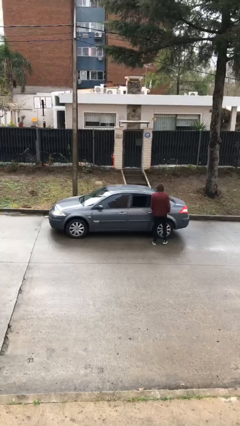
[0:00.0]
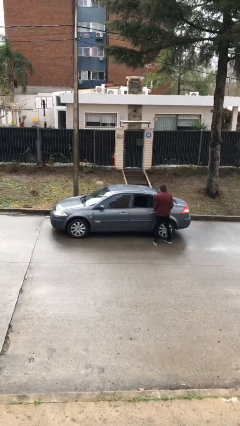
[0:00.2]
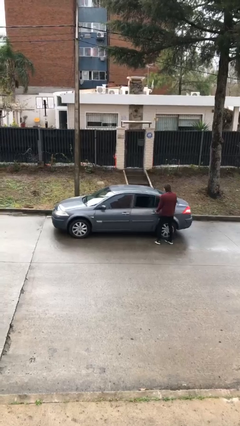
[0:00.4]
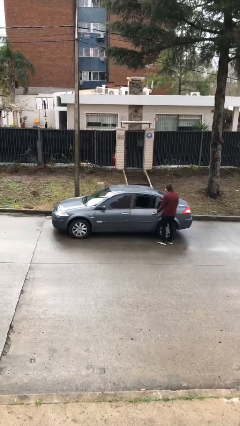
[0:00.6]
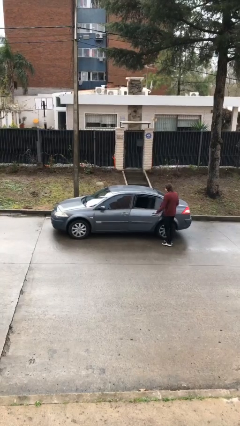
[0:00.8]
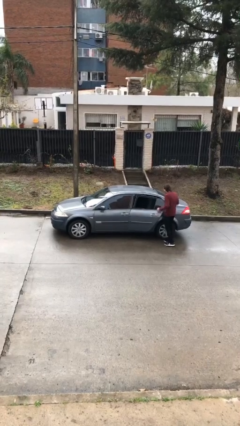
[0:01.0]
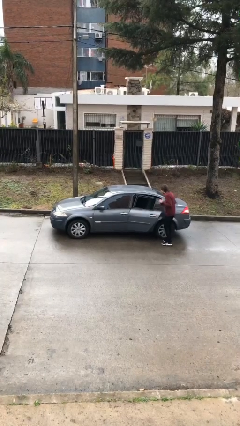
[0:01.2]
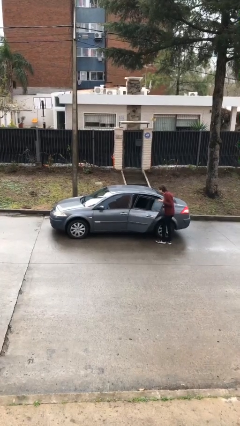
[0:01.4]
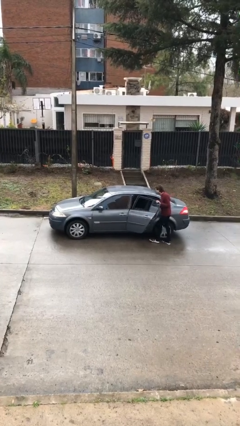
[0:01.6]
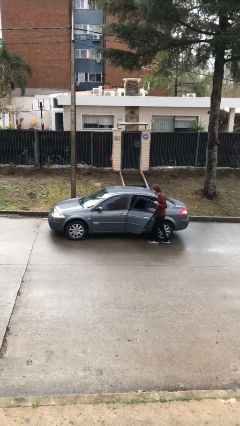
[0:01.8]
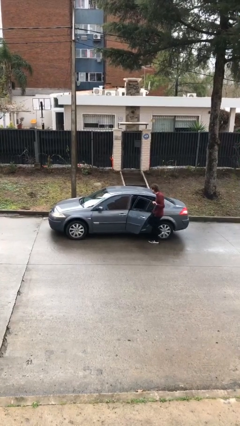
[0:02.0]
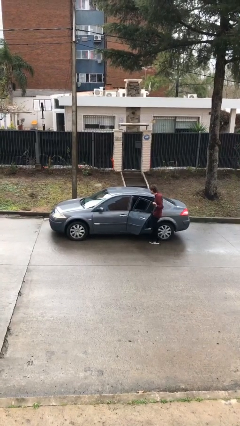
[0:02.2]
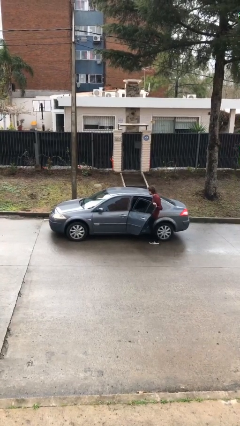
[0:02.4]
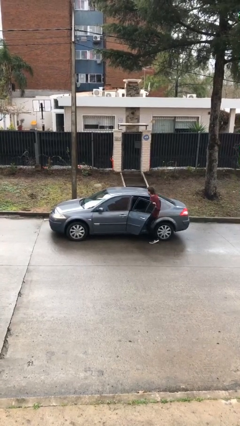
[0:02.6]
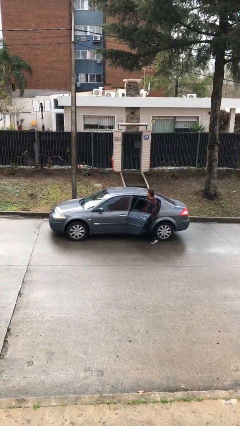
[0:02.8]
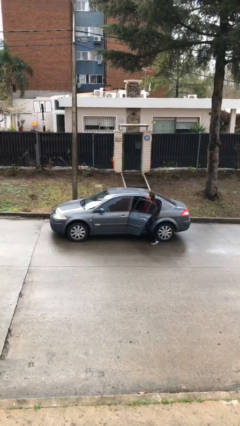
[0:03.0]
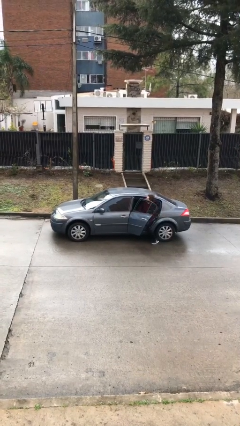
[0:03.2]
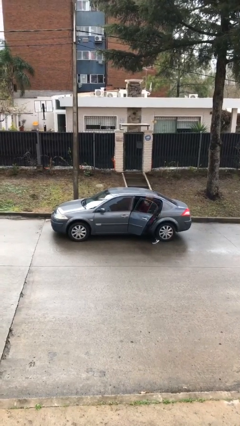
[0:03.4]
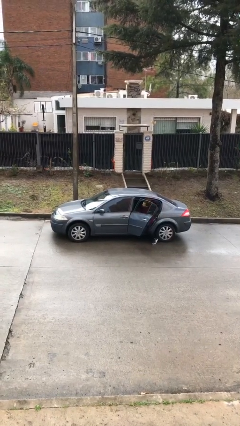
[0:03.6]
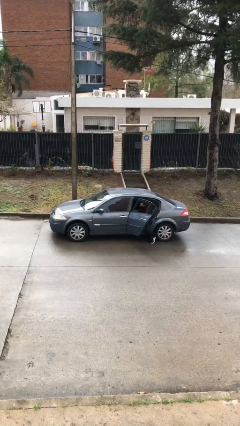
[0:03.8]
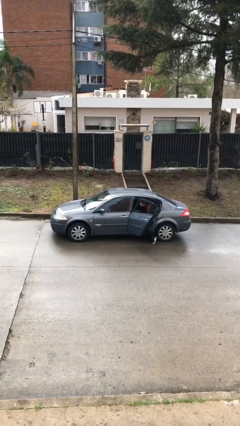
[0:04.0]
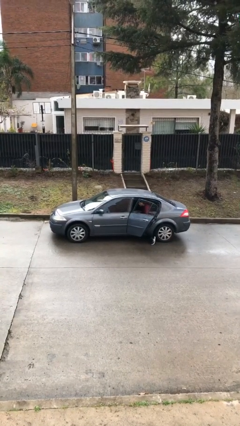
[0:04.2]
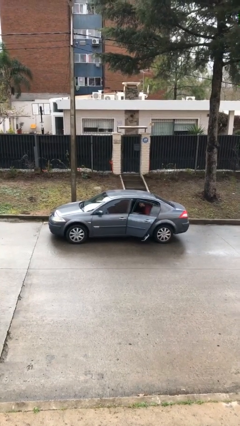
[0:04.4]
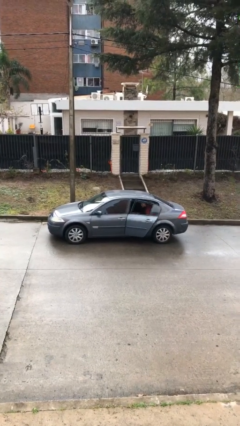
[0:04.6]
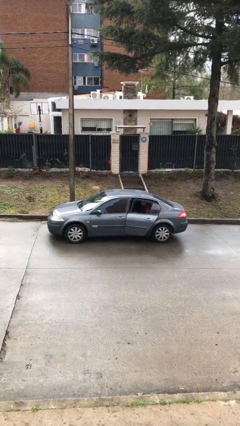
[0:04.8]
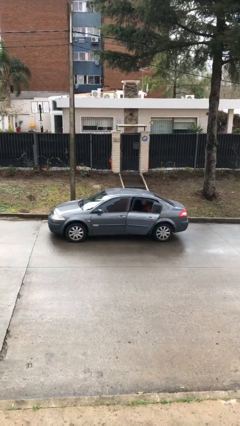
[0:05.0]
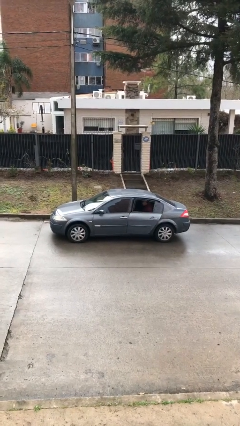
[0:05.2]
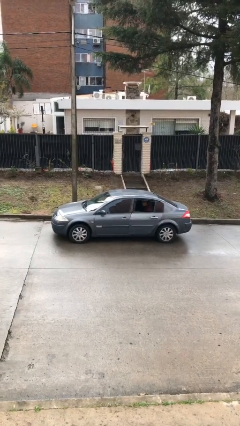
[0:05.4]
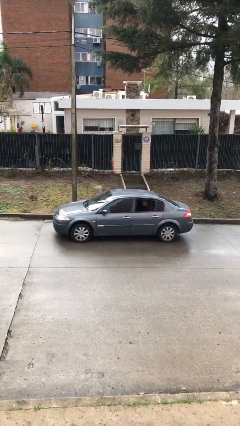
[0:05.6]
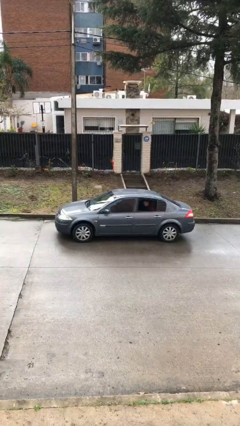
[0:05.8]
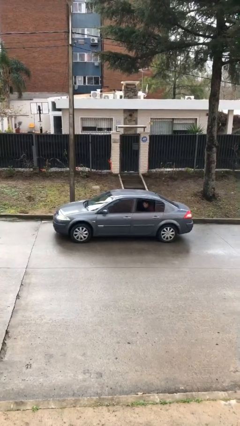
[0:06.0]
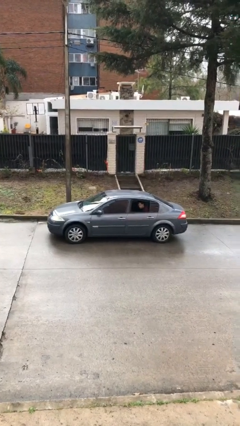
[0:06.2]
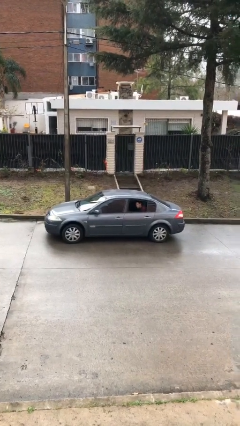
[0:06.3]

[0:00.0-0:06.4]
car picks up person

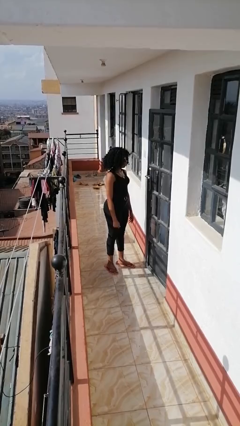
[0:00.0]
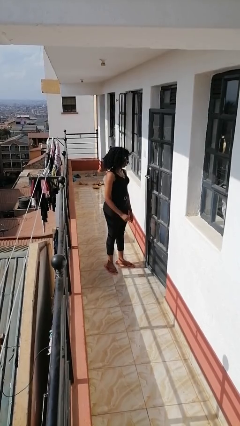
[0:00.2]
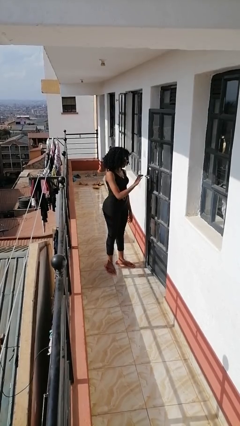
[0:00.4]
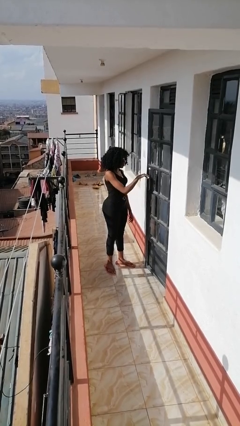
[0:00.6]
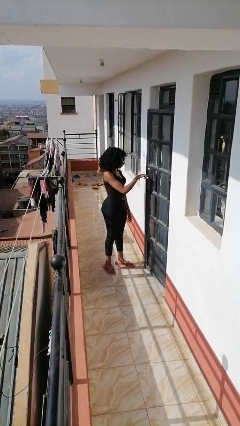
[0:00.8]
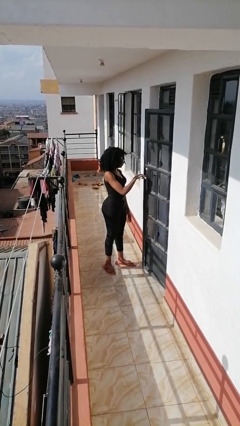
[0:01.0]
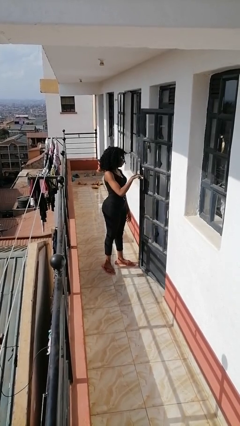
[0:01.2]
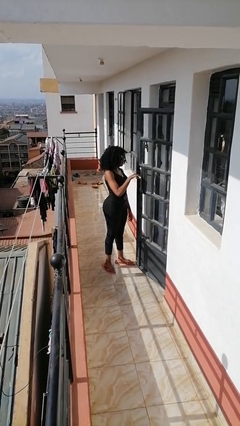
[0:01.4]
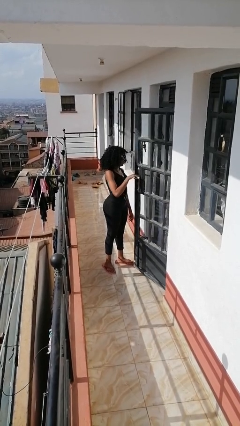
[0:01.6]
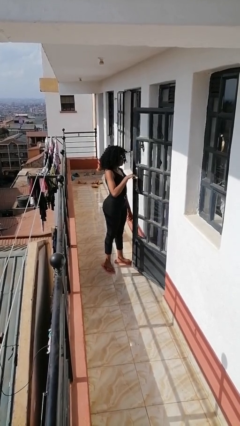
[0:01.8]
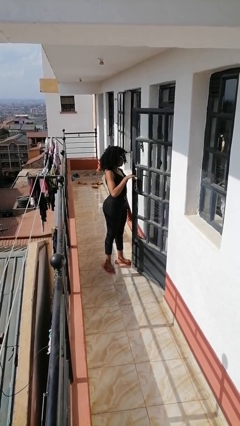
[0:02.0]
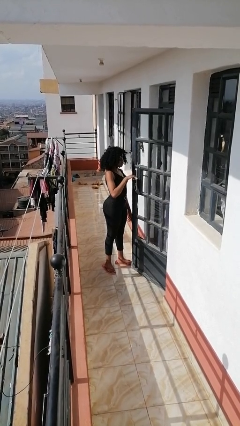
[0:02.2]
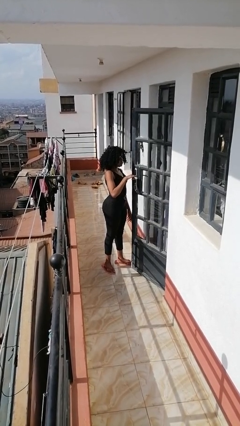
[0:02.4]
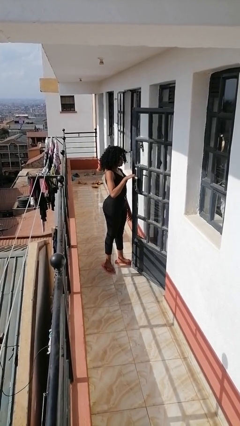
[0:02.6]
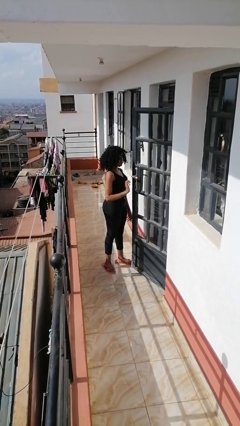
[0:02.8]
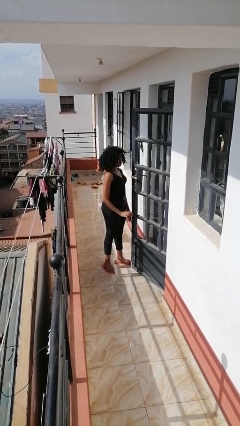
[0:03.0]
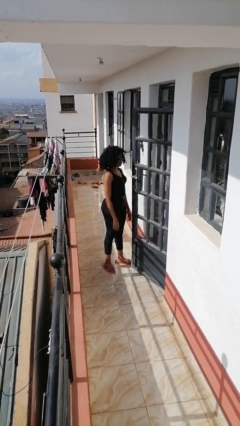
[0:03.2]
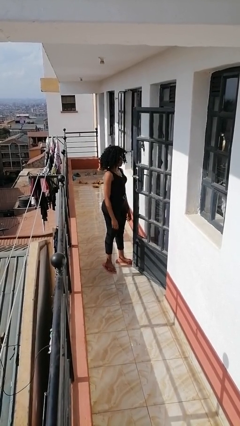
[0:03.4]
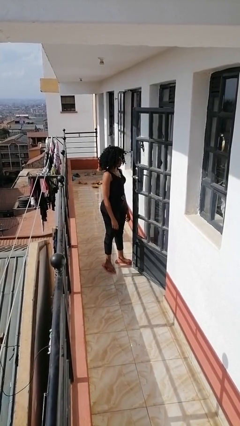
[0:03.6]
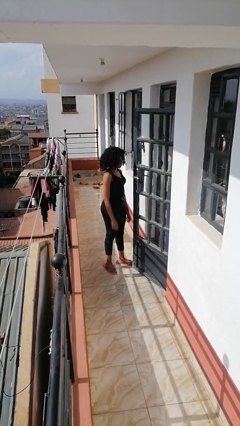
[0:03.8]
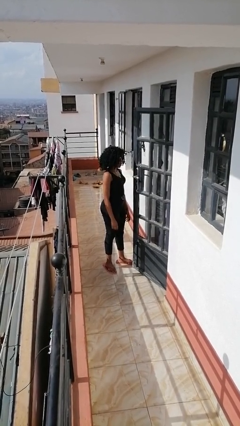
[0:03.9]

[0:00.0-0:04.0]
person opens facility door

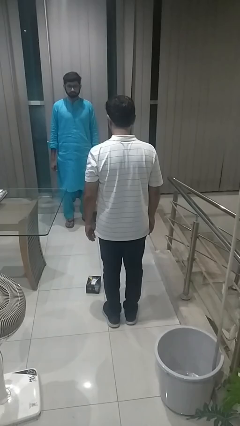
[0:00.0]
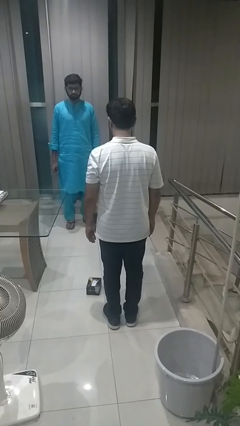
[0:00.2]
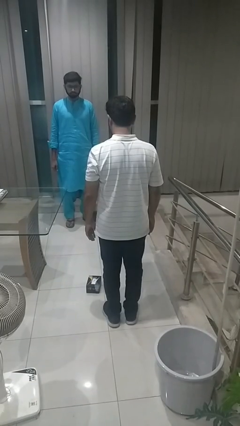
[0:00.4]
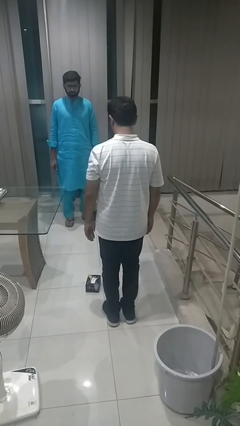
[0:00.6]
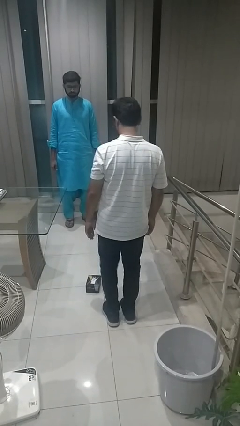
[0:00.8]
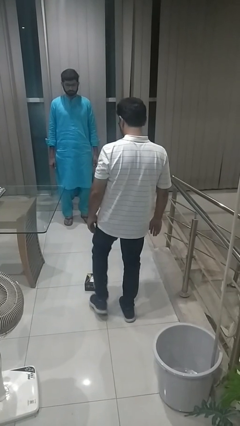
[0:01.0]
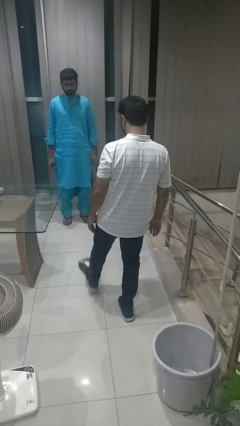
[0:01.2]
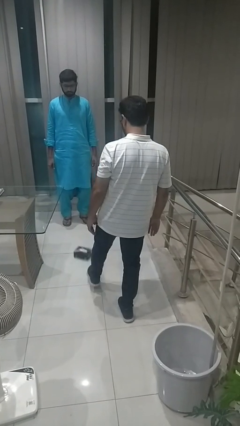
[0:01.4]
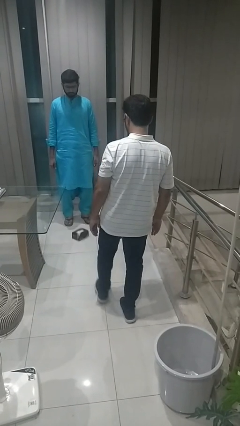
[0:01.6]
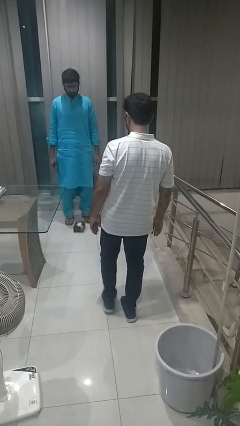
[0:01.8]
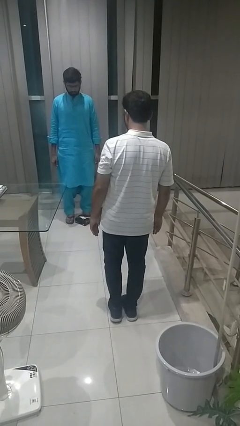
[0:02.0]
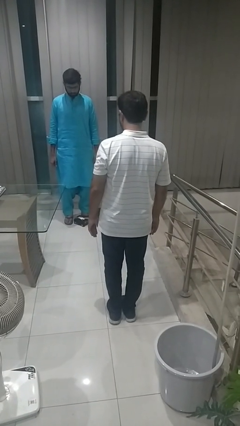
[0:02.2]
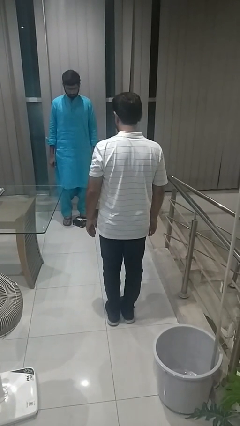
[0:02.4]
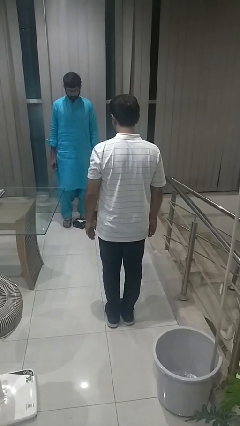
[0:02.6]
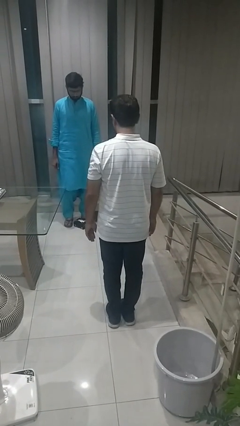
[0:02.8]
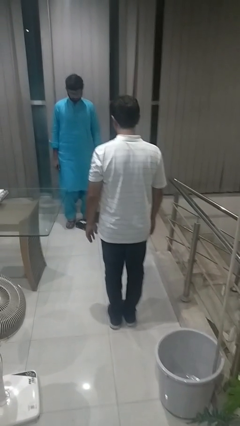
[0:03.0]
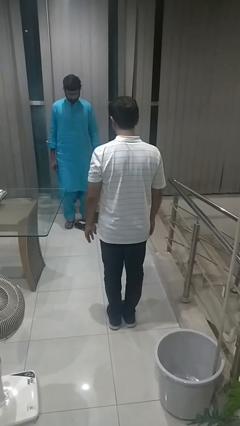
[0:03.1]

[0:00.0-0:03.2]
person kicks object to person

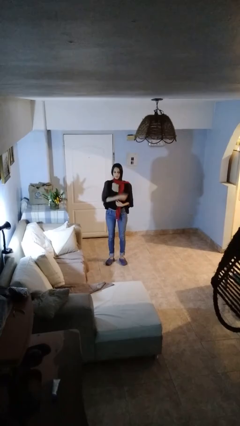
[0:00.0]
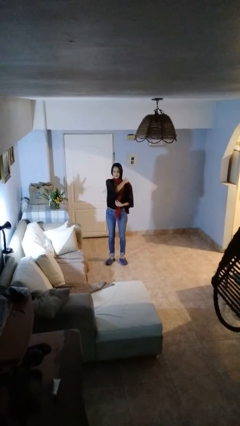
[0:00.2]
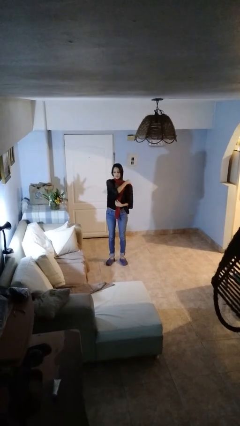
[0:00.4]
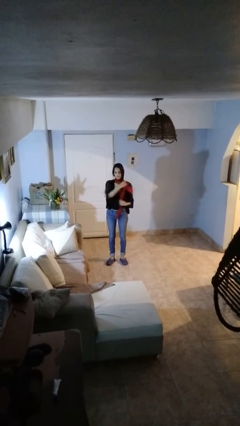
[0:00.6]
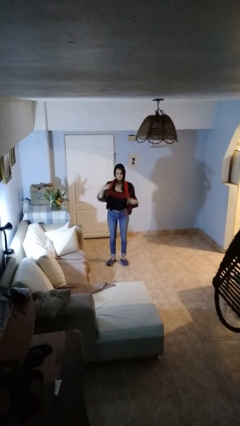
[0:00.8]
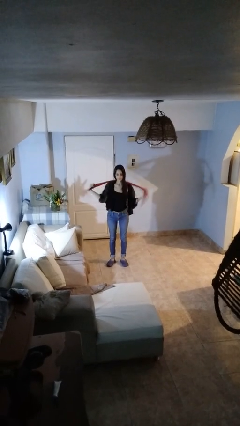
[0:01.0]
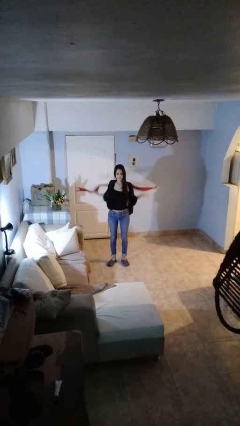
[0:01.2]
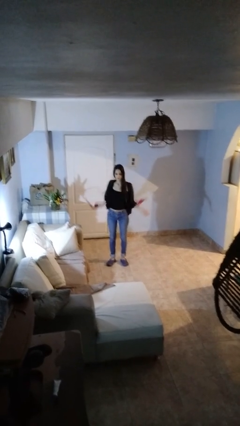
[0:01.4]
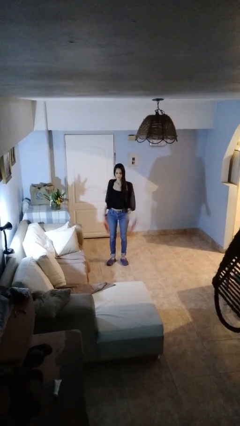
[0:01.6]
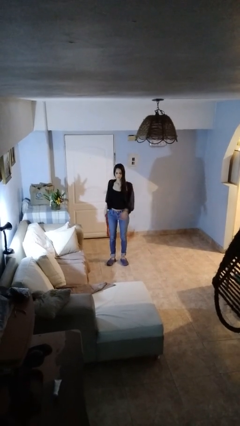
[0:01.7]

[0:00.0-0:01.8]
person takes off scarf

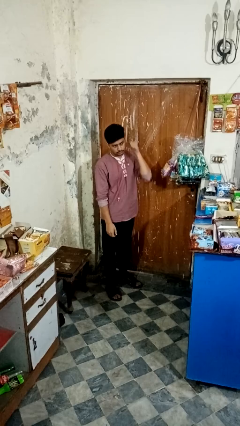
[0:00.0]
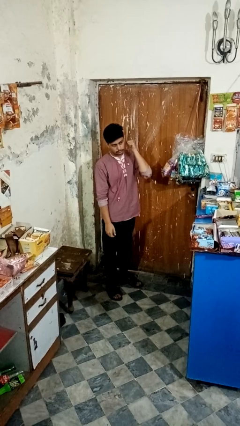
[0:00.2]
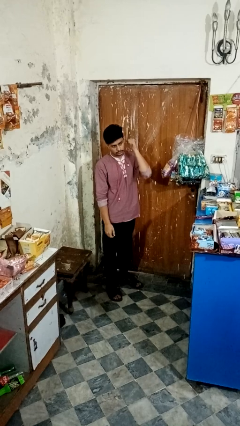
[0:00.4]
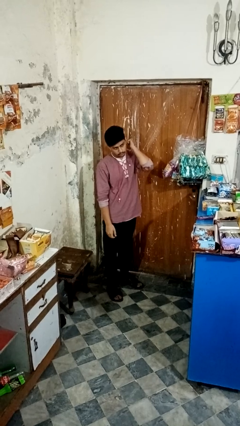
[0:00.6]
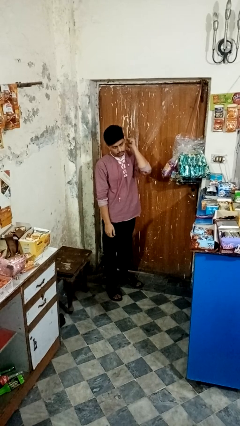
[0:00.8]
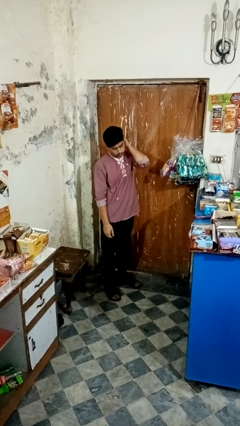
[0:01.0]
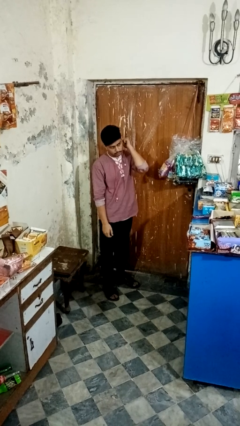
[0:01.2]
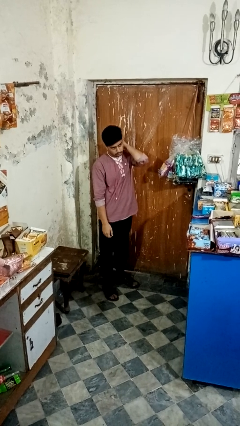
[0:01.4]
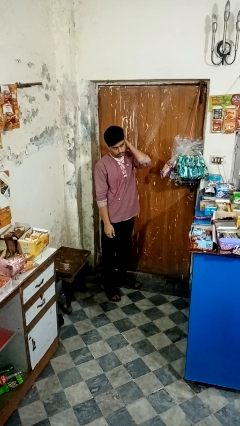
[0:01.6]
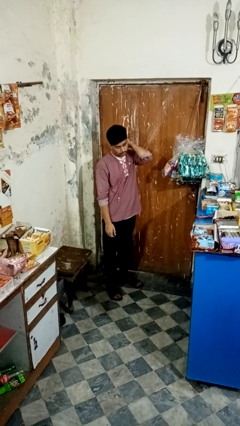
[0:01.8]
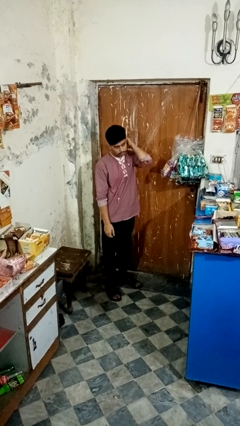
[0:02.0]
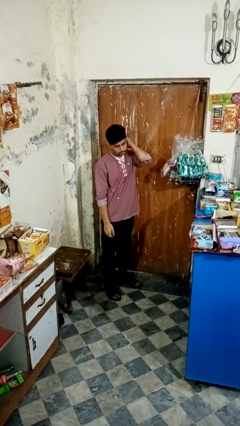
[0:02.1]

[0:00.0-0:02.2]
person gestures behind me

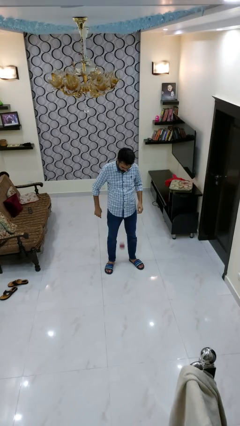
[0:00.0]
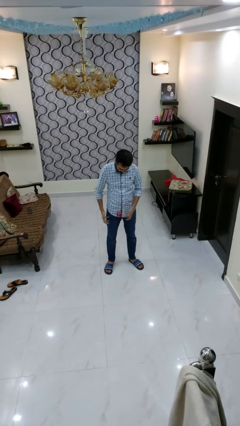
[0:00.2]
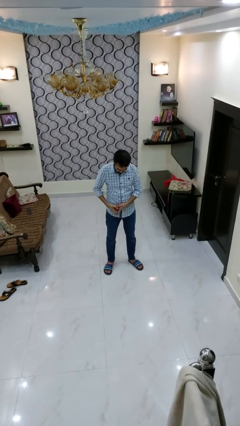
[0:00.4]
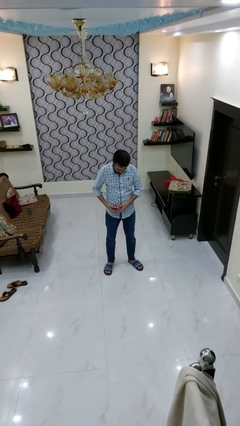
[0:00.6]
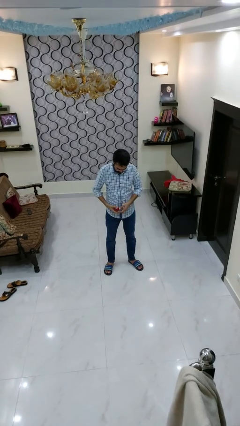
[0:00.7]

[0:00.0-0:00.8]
person bounces ball on floor
